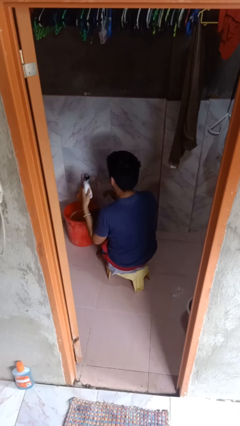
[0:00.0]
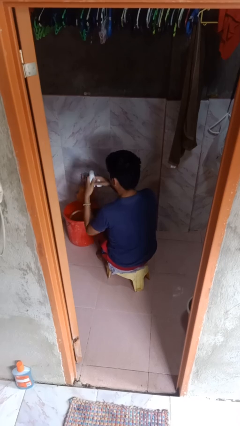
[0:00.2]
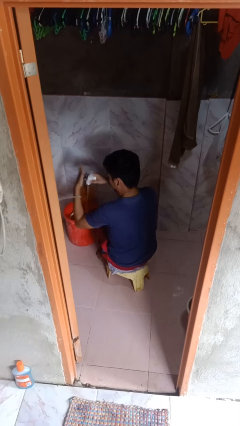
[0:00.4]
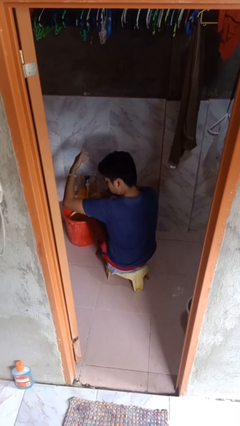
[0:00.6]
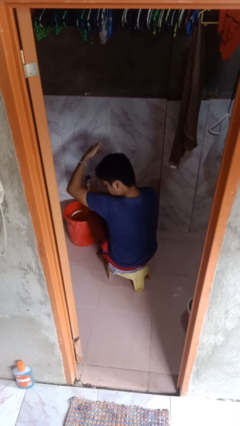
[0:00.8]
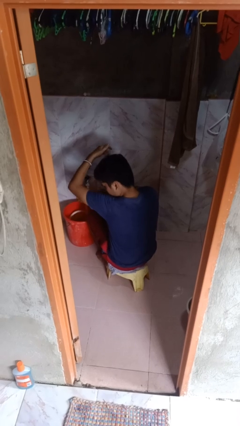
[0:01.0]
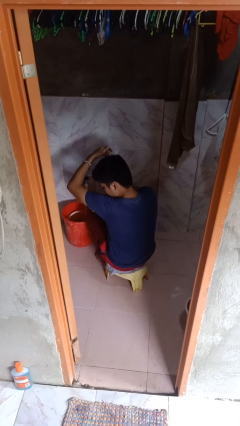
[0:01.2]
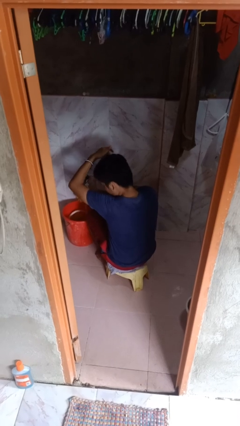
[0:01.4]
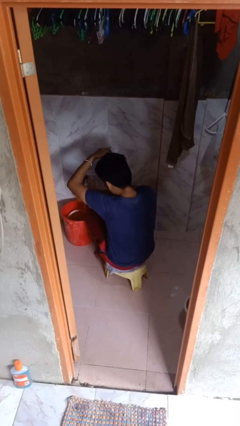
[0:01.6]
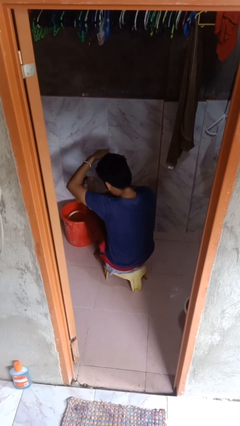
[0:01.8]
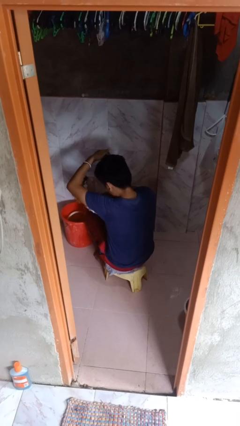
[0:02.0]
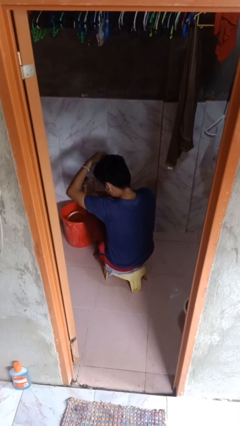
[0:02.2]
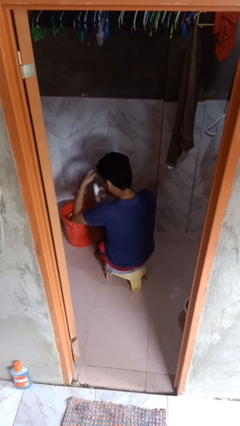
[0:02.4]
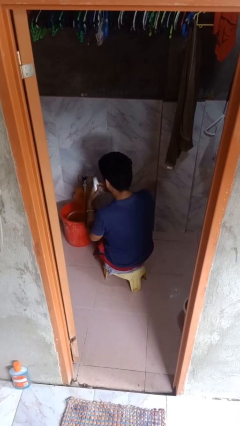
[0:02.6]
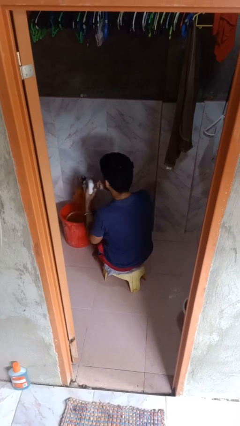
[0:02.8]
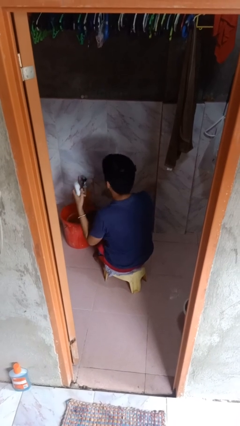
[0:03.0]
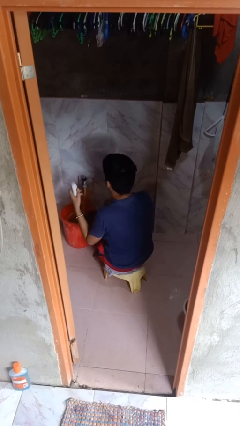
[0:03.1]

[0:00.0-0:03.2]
person applies deodorant

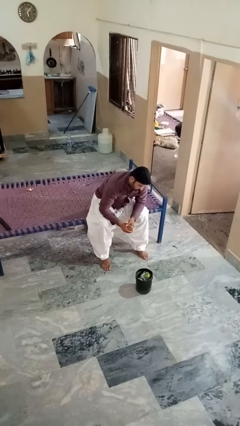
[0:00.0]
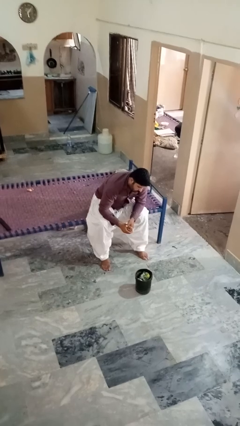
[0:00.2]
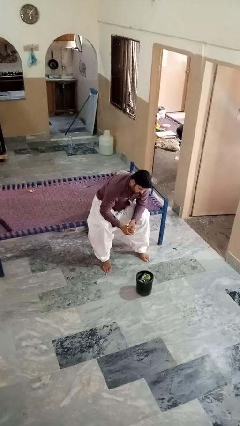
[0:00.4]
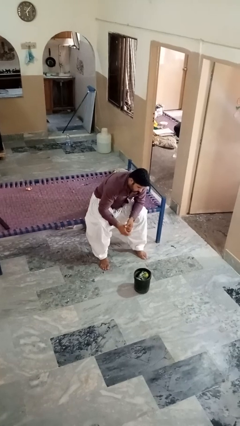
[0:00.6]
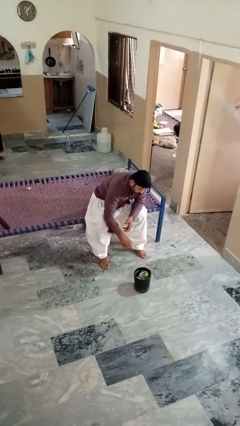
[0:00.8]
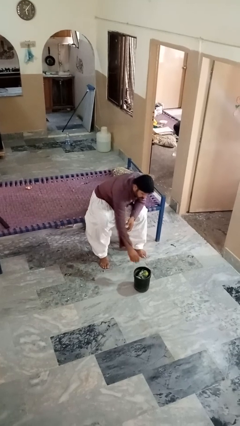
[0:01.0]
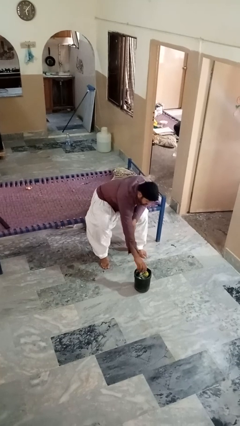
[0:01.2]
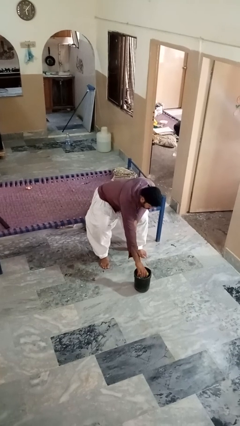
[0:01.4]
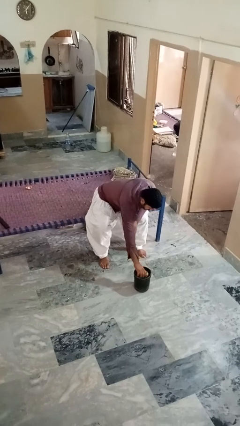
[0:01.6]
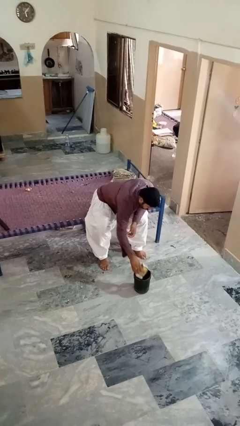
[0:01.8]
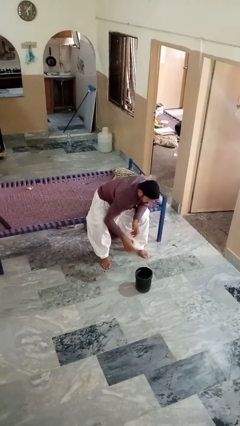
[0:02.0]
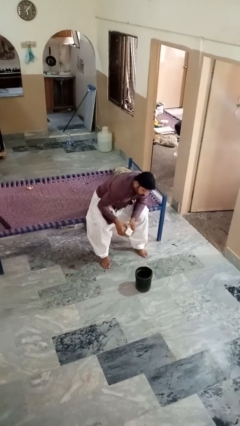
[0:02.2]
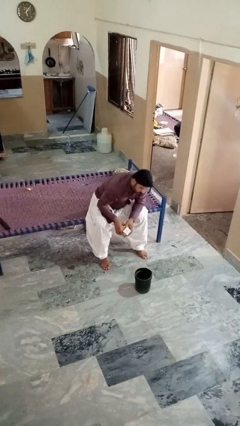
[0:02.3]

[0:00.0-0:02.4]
person takes object from basket

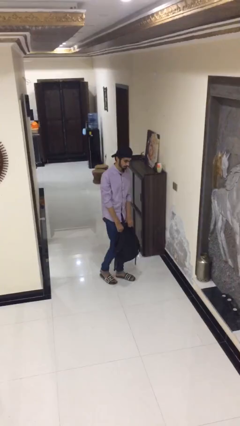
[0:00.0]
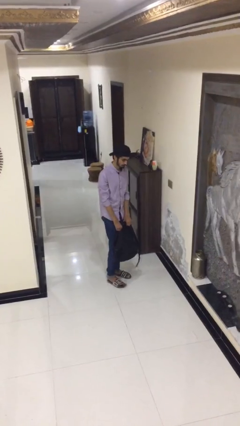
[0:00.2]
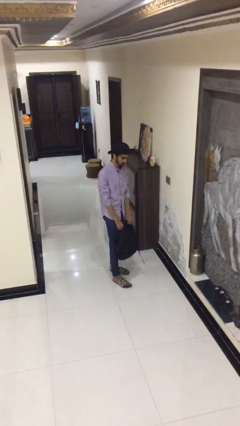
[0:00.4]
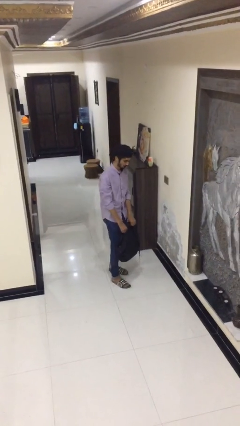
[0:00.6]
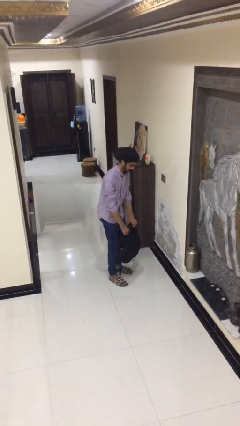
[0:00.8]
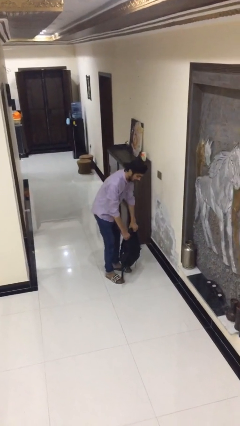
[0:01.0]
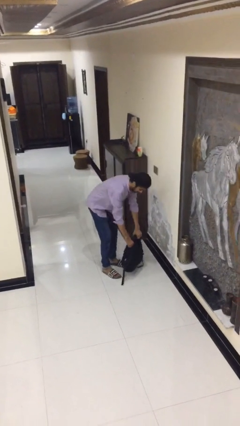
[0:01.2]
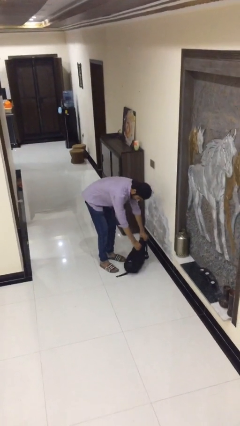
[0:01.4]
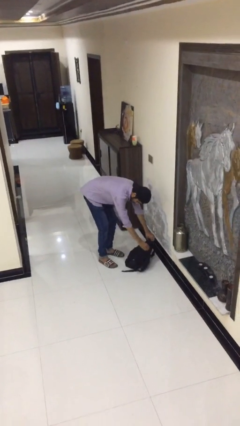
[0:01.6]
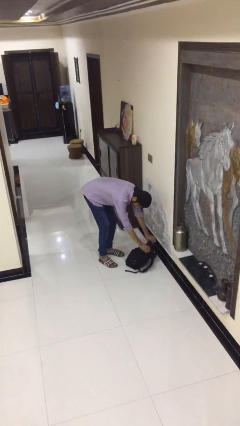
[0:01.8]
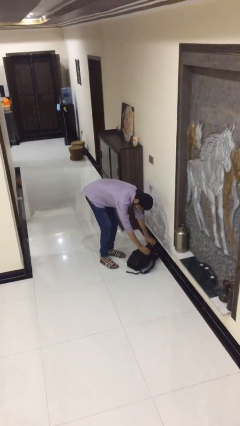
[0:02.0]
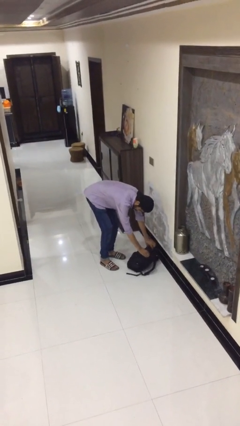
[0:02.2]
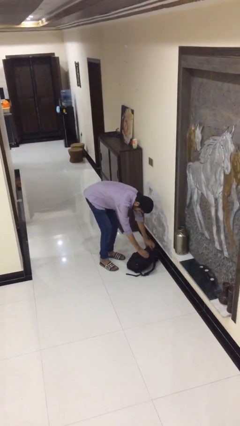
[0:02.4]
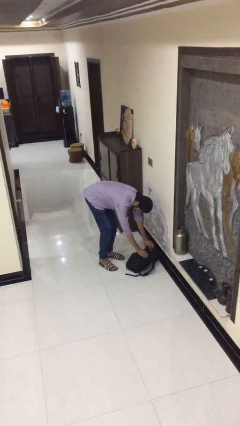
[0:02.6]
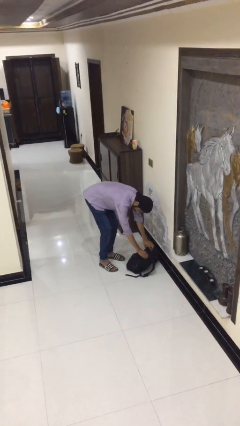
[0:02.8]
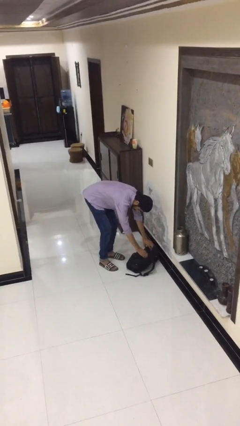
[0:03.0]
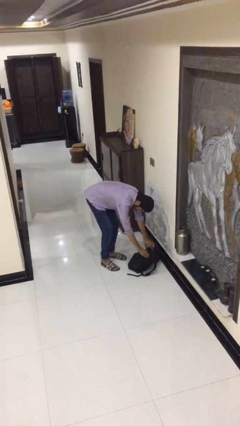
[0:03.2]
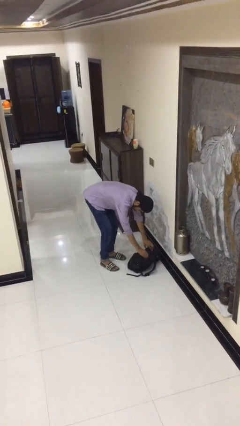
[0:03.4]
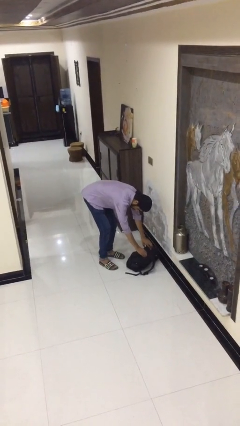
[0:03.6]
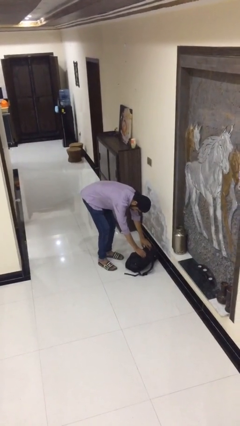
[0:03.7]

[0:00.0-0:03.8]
person puts down object on floor

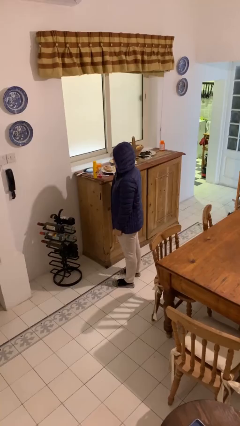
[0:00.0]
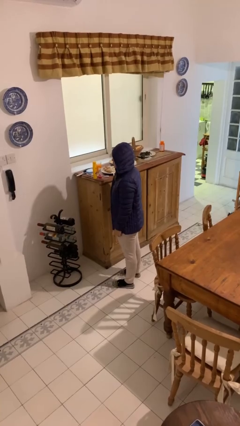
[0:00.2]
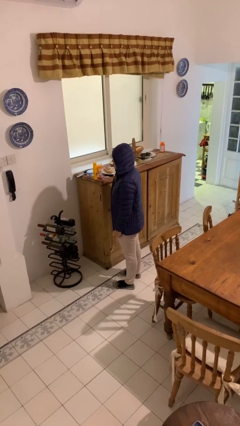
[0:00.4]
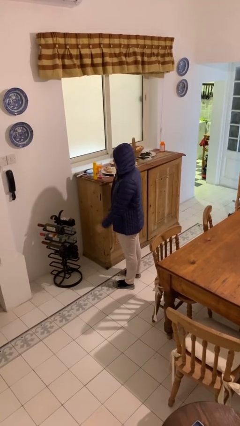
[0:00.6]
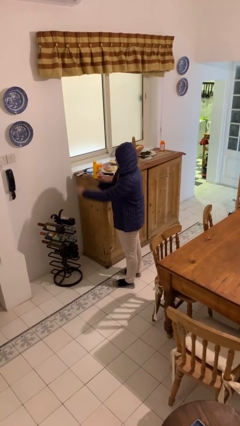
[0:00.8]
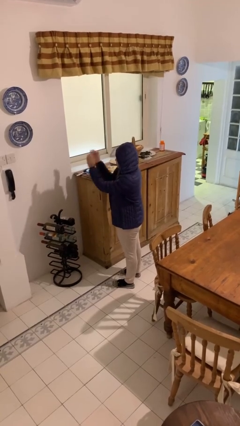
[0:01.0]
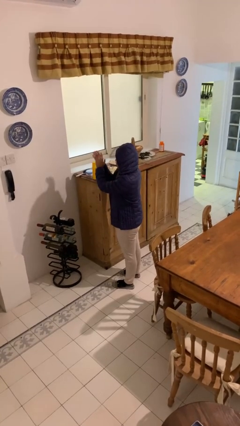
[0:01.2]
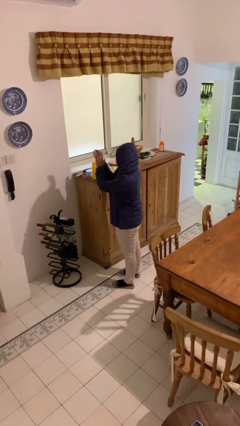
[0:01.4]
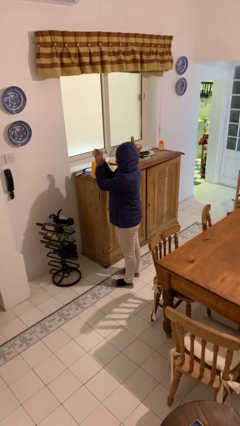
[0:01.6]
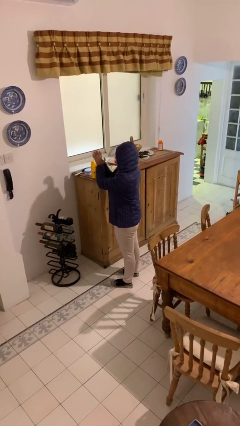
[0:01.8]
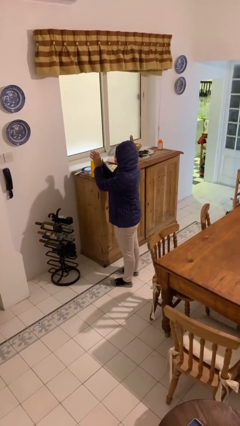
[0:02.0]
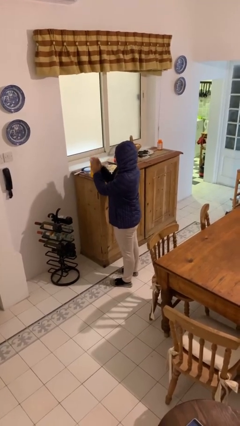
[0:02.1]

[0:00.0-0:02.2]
person claps hands

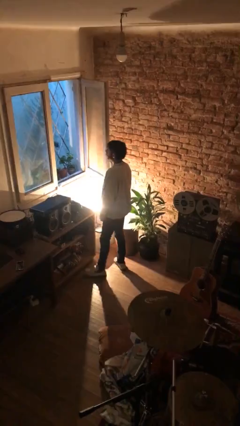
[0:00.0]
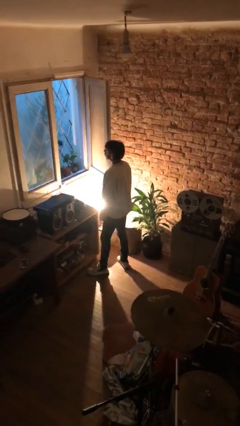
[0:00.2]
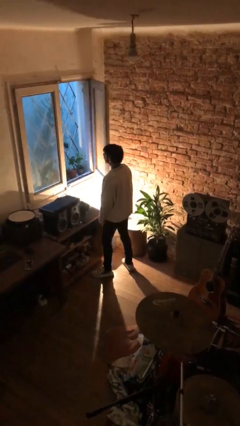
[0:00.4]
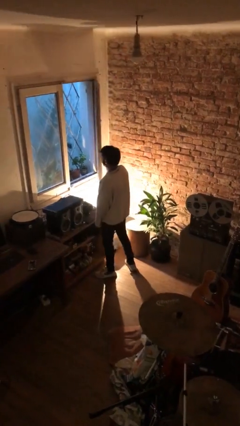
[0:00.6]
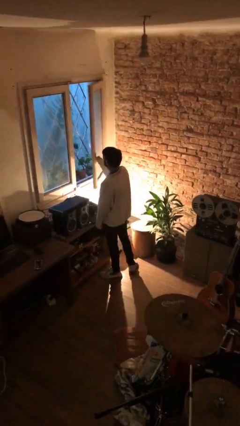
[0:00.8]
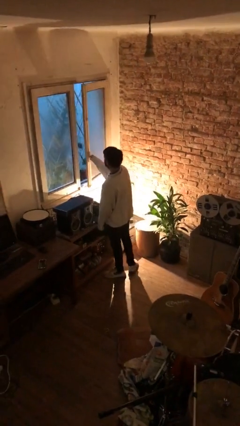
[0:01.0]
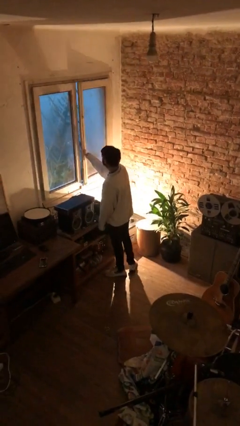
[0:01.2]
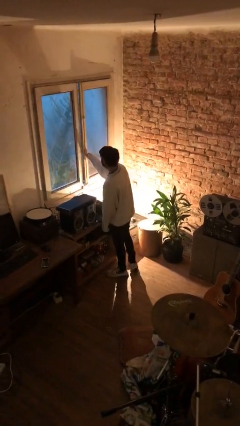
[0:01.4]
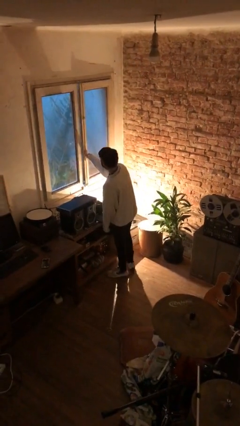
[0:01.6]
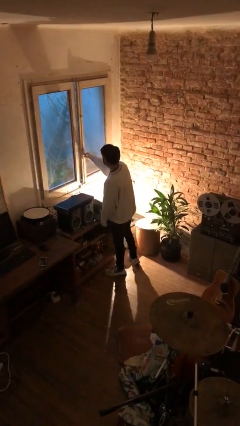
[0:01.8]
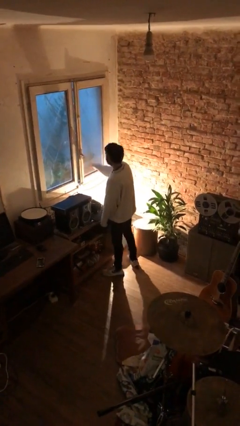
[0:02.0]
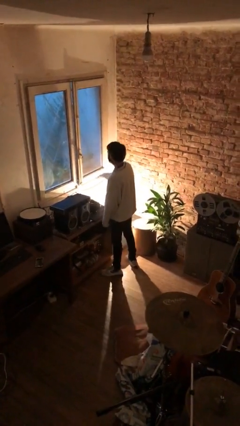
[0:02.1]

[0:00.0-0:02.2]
person closes home window

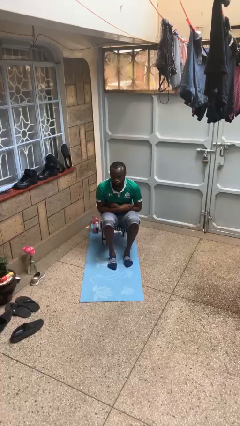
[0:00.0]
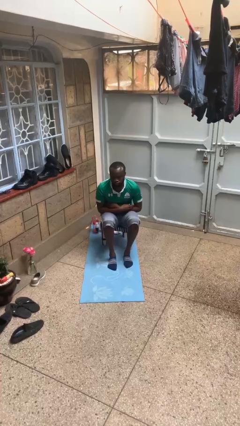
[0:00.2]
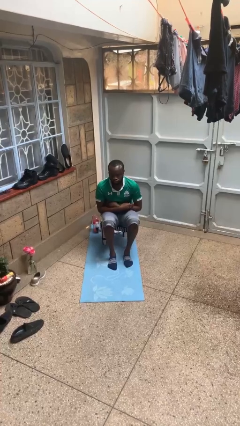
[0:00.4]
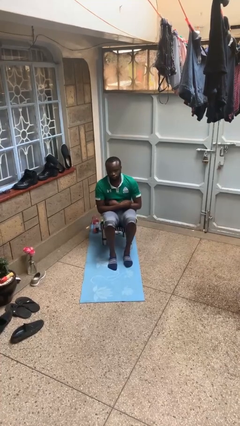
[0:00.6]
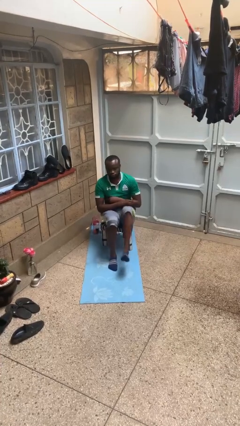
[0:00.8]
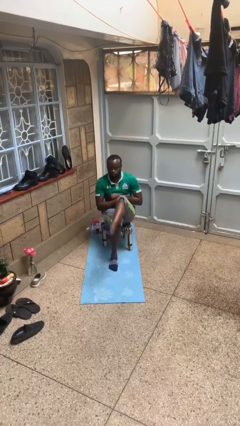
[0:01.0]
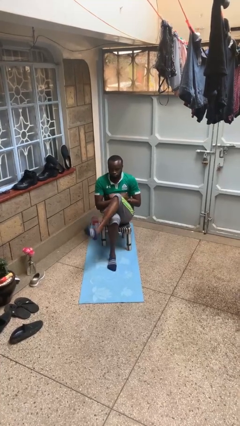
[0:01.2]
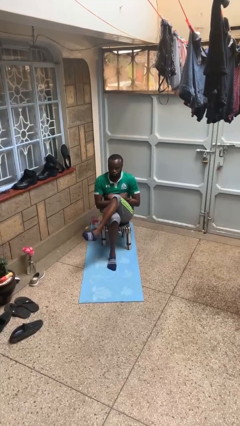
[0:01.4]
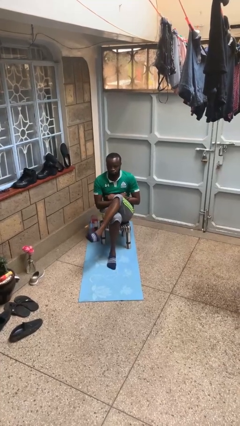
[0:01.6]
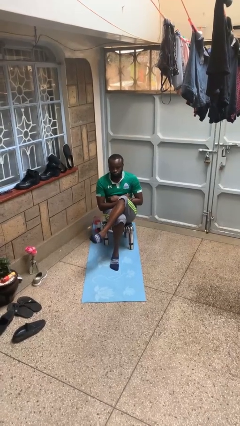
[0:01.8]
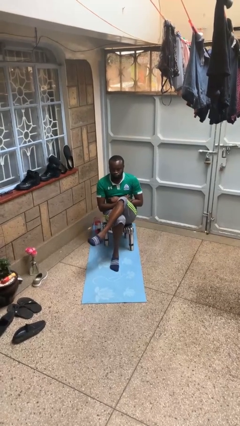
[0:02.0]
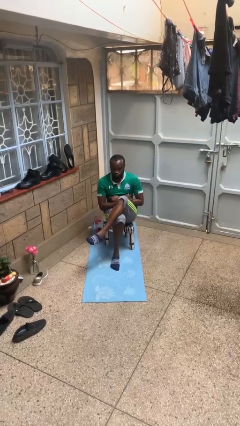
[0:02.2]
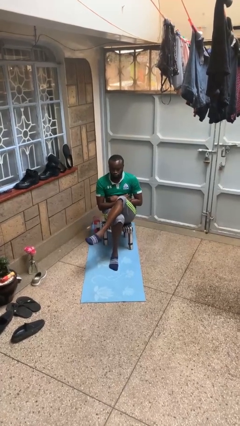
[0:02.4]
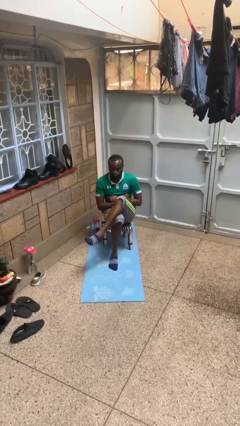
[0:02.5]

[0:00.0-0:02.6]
person crosses legs

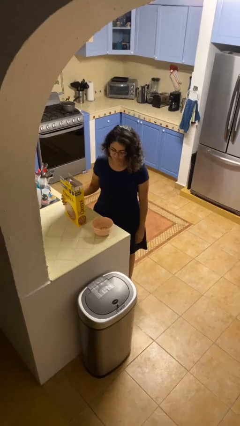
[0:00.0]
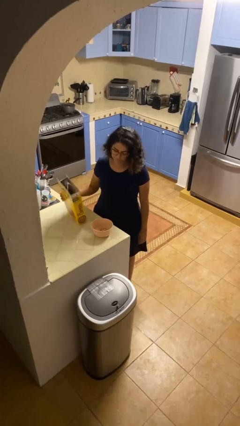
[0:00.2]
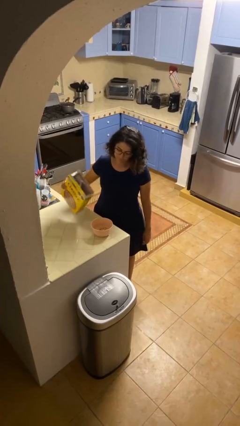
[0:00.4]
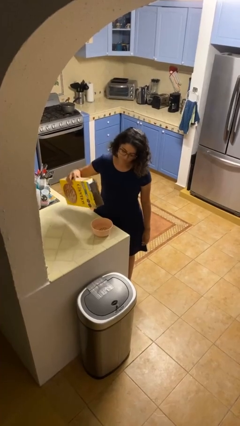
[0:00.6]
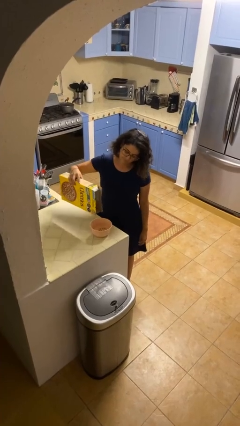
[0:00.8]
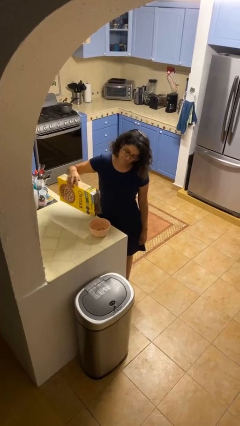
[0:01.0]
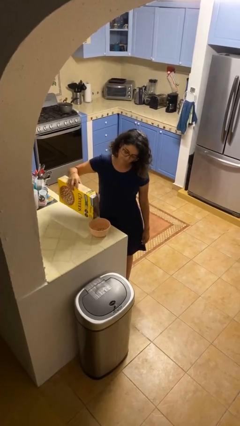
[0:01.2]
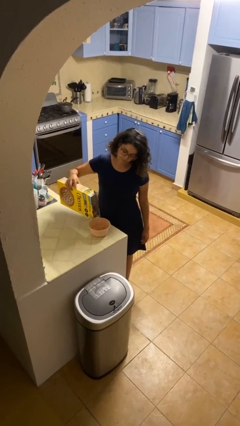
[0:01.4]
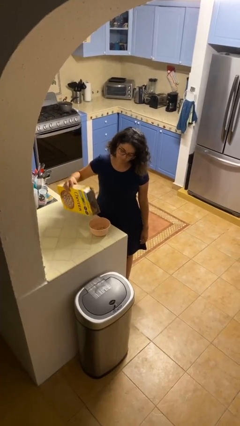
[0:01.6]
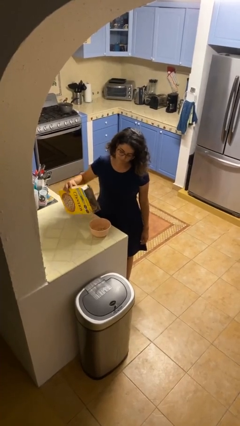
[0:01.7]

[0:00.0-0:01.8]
person pours into bowl
